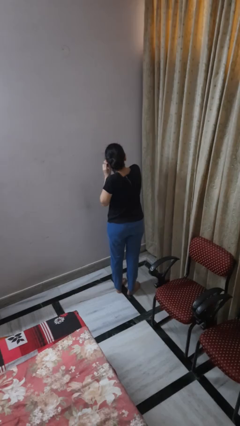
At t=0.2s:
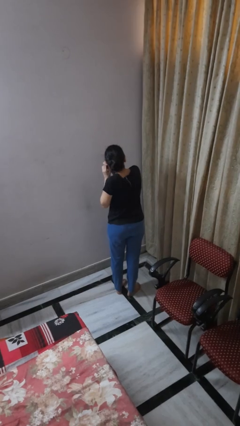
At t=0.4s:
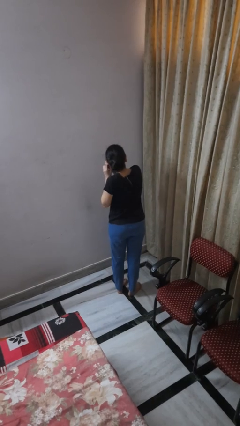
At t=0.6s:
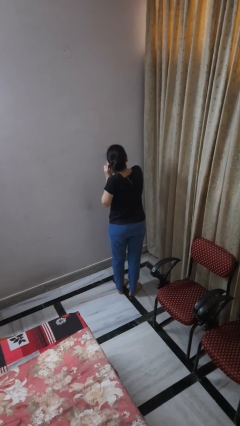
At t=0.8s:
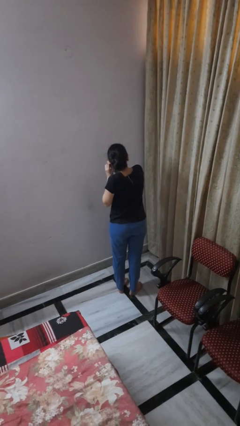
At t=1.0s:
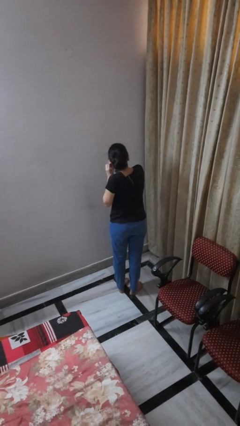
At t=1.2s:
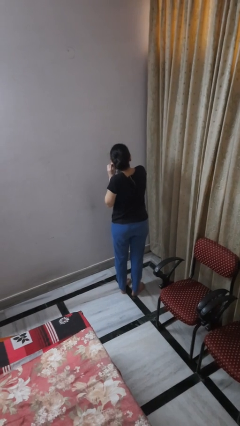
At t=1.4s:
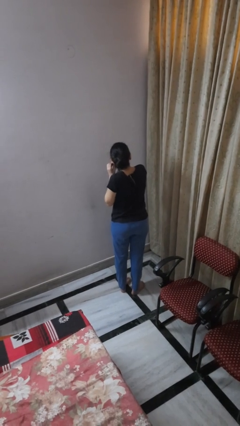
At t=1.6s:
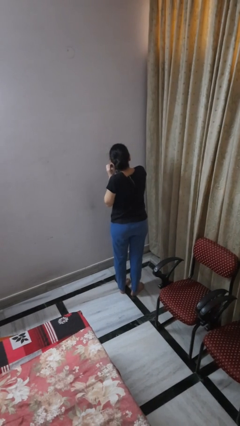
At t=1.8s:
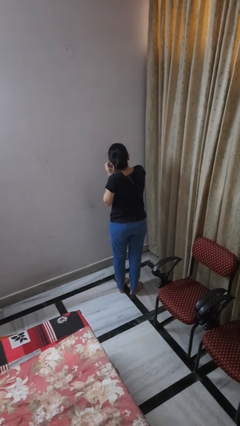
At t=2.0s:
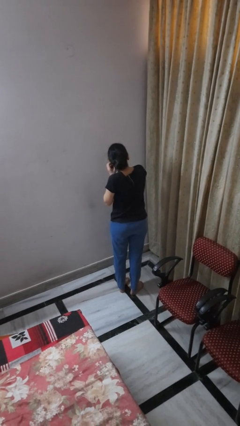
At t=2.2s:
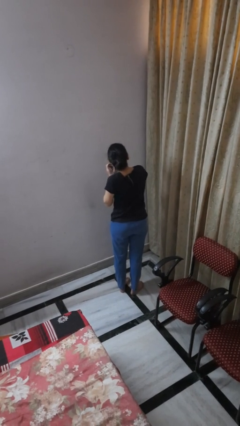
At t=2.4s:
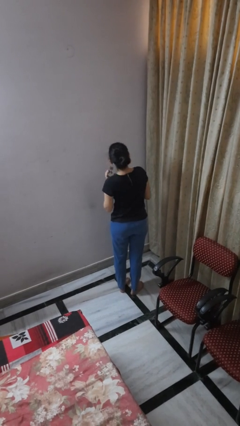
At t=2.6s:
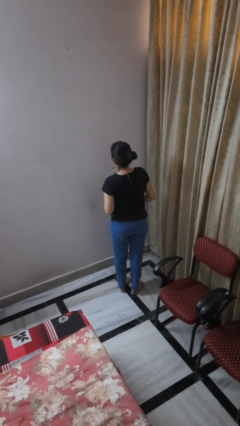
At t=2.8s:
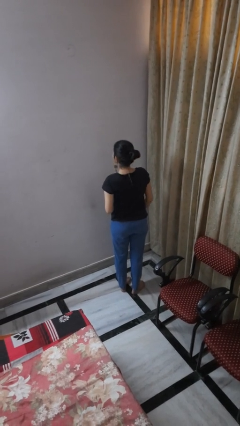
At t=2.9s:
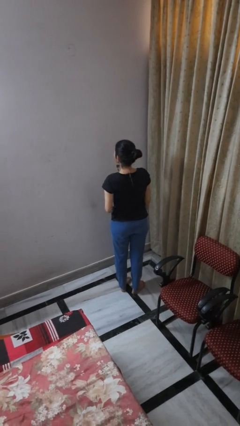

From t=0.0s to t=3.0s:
person puts on earrings

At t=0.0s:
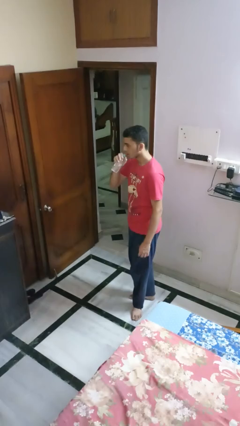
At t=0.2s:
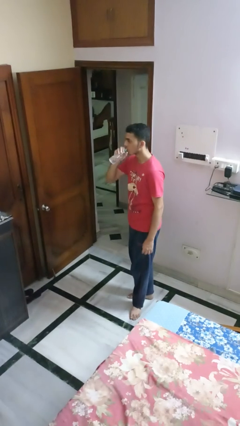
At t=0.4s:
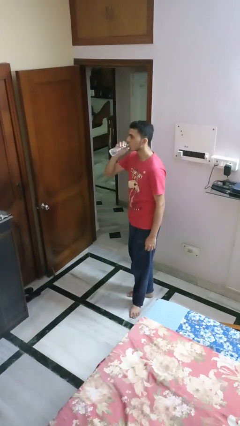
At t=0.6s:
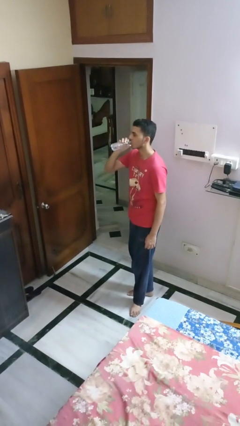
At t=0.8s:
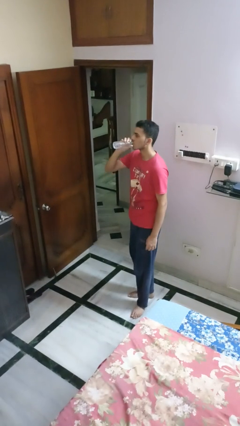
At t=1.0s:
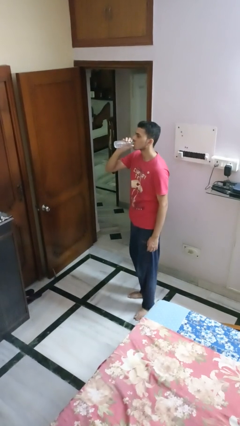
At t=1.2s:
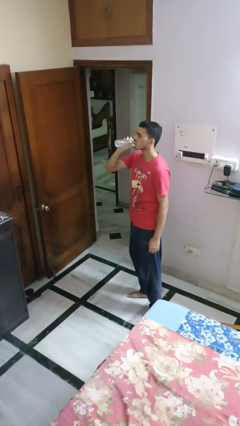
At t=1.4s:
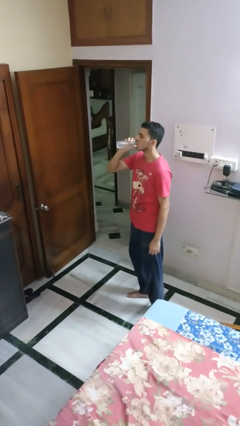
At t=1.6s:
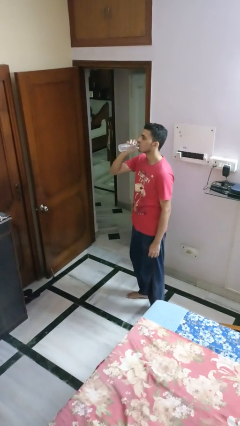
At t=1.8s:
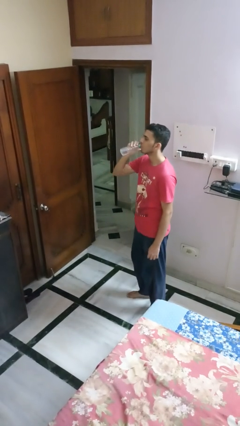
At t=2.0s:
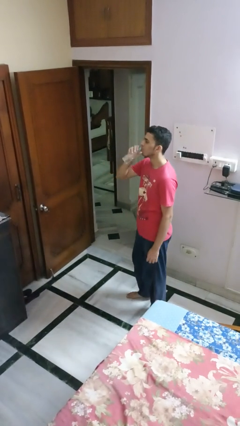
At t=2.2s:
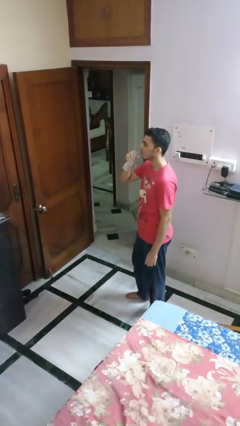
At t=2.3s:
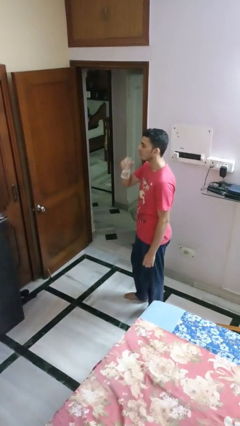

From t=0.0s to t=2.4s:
person drinks from bottle

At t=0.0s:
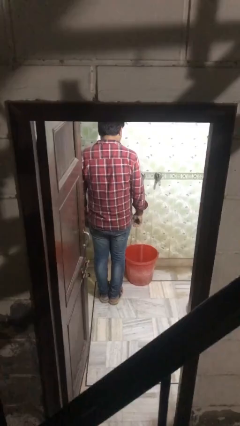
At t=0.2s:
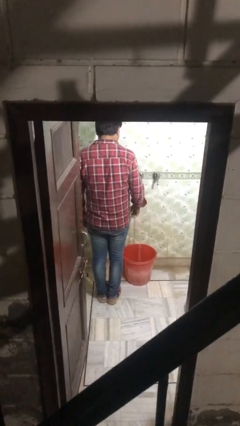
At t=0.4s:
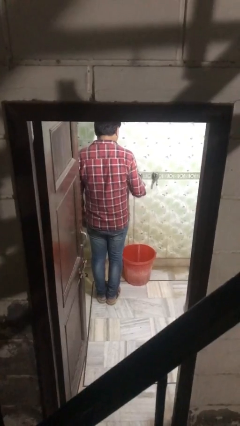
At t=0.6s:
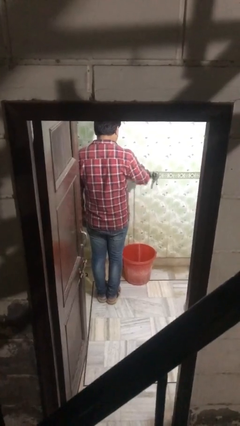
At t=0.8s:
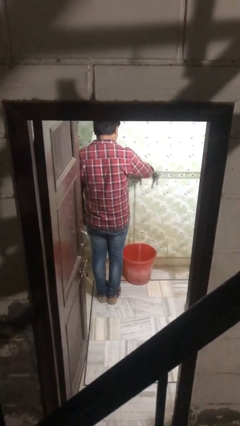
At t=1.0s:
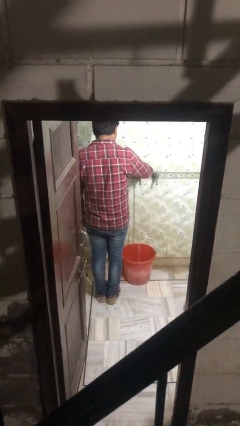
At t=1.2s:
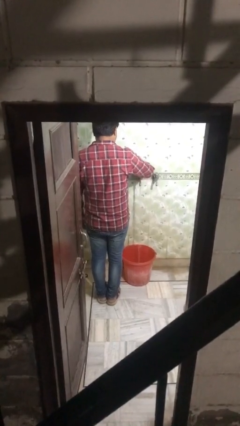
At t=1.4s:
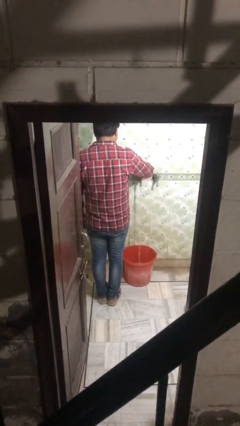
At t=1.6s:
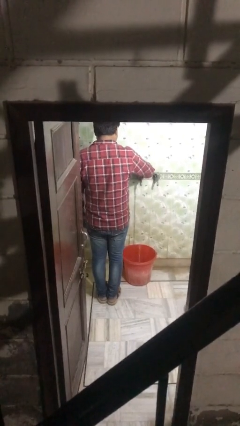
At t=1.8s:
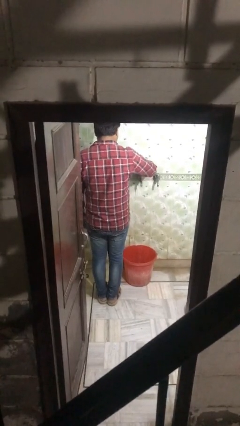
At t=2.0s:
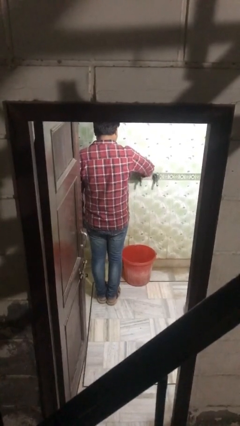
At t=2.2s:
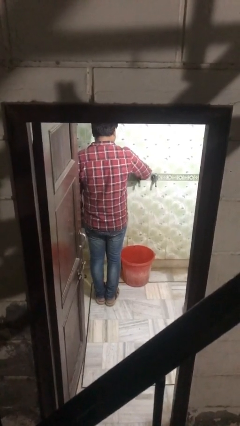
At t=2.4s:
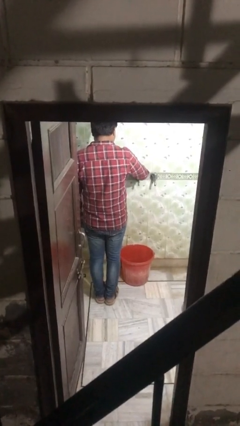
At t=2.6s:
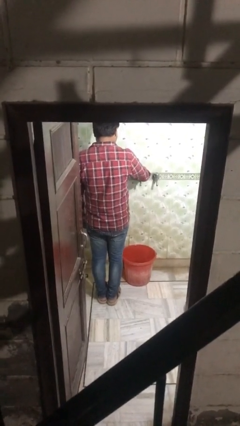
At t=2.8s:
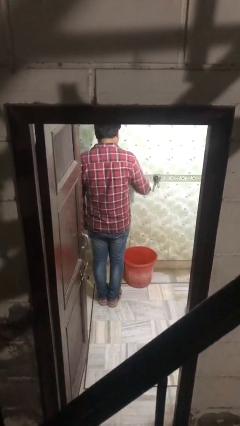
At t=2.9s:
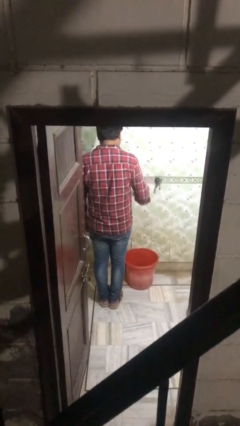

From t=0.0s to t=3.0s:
person turns off faucet

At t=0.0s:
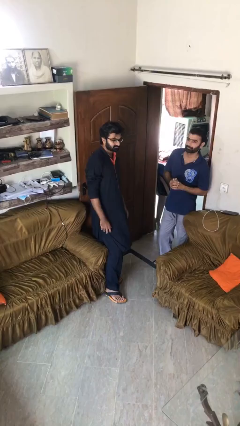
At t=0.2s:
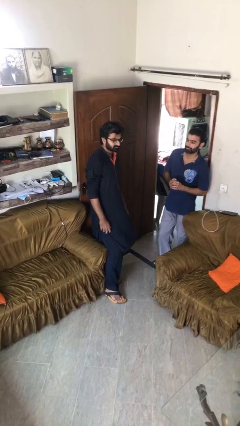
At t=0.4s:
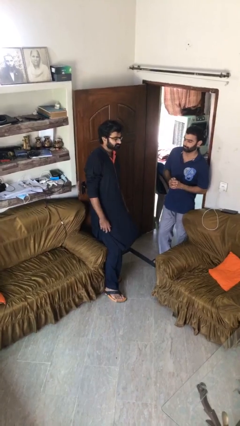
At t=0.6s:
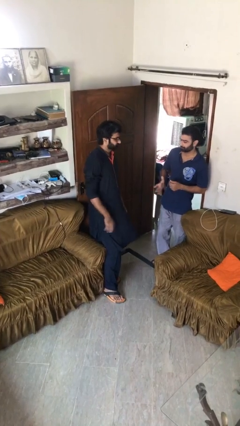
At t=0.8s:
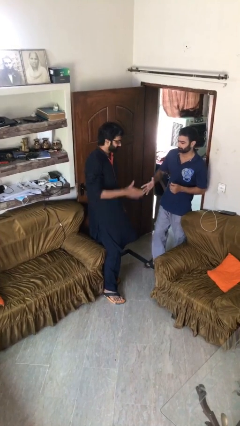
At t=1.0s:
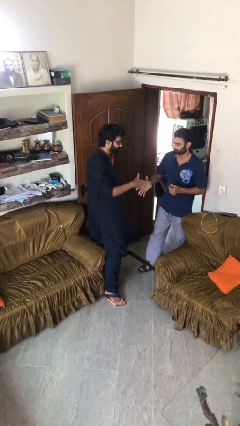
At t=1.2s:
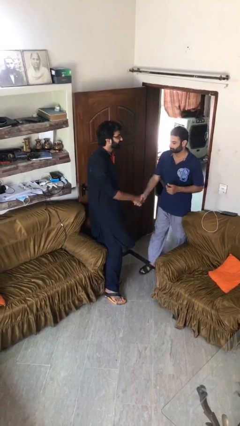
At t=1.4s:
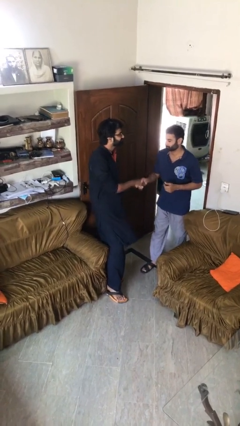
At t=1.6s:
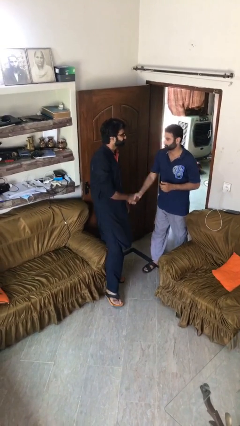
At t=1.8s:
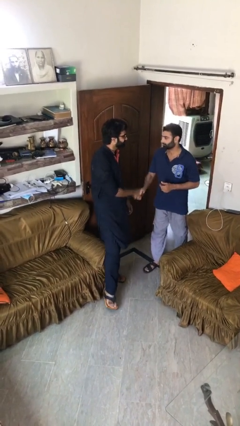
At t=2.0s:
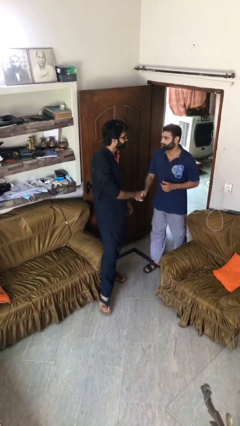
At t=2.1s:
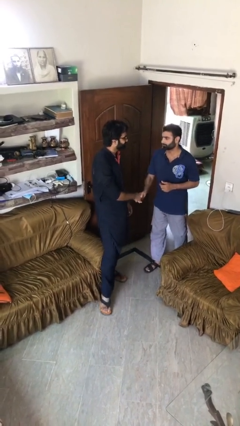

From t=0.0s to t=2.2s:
person shakes hand

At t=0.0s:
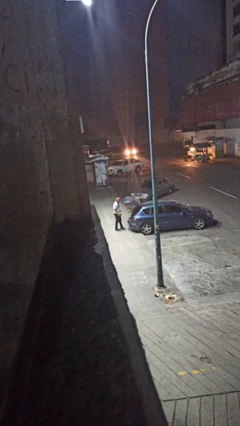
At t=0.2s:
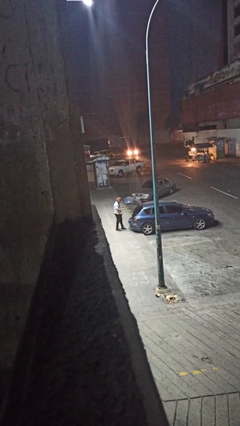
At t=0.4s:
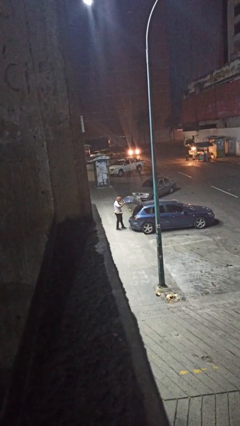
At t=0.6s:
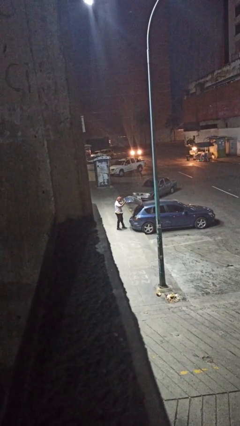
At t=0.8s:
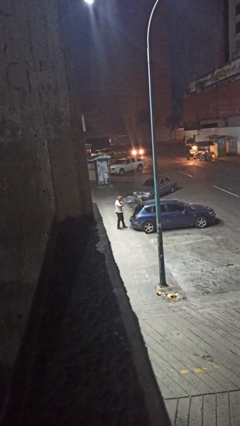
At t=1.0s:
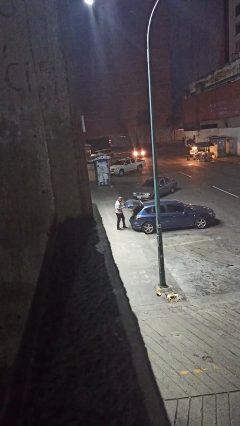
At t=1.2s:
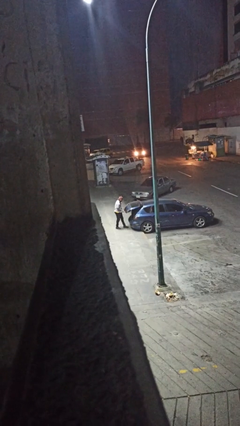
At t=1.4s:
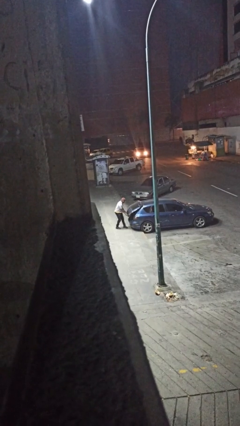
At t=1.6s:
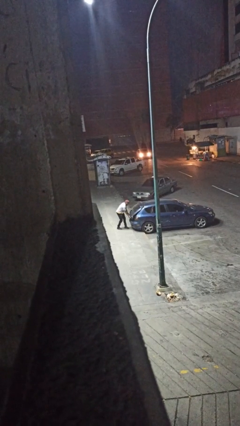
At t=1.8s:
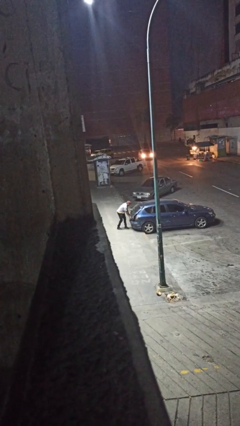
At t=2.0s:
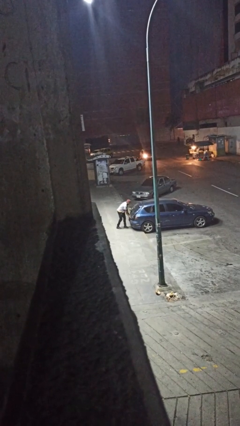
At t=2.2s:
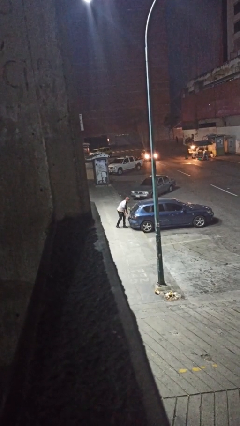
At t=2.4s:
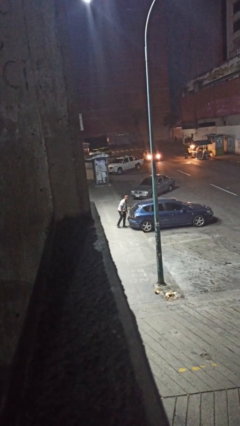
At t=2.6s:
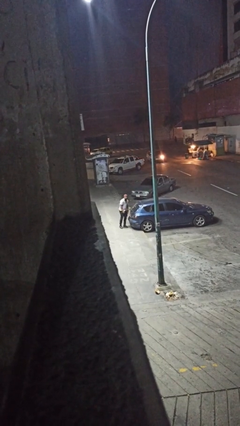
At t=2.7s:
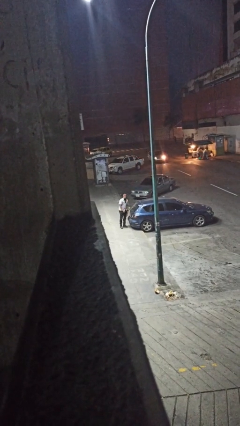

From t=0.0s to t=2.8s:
person closes car trunk

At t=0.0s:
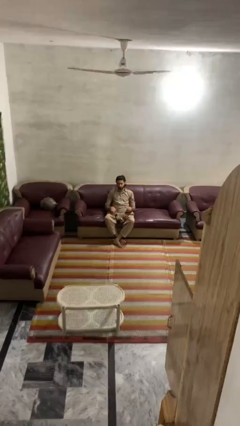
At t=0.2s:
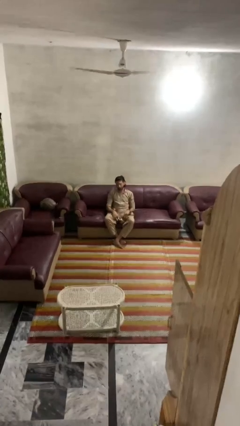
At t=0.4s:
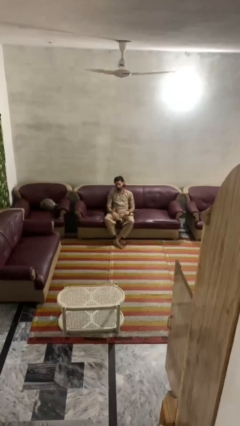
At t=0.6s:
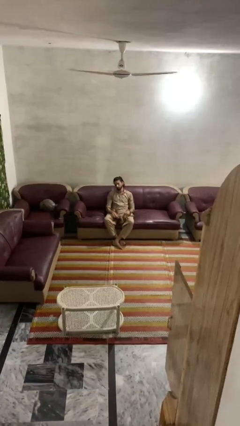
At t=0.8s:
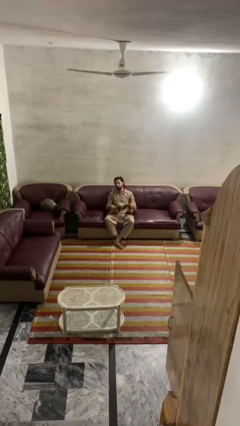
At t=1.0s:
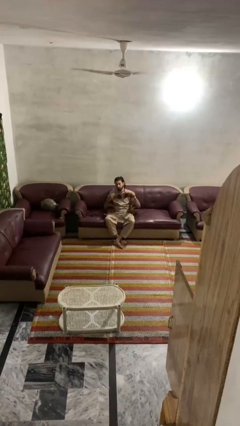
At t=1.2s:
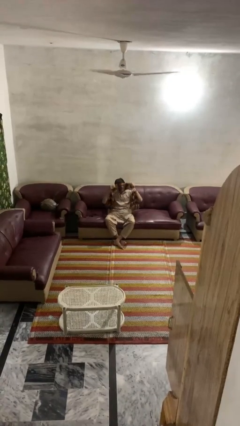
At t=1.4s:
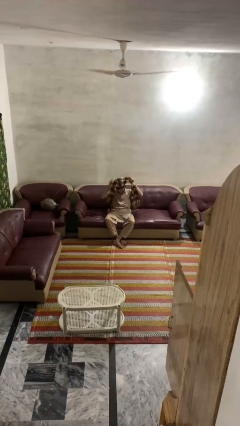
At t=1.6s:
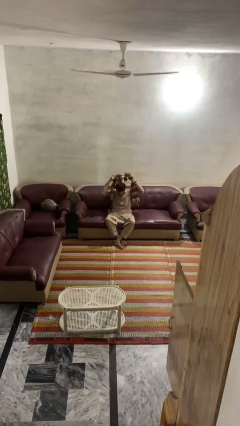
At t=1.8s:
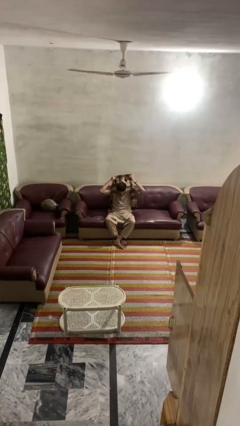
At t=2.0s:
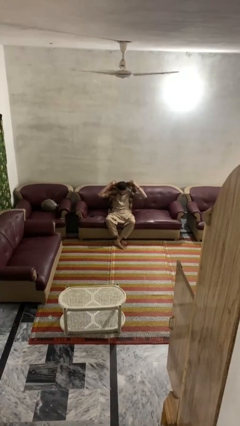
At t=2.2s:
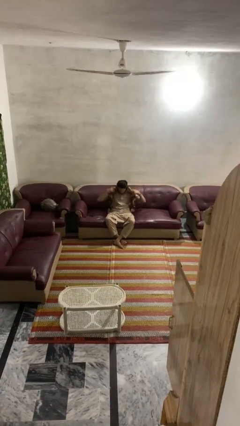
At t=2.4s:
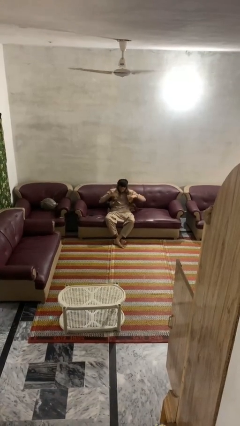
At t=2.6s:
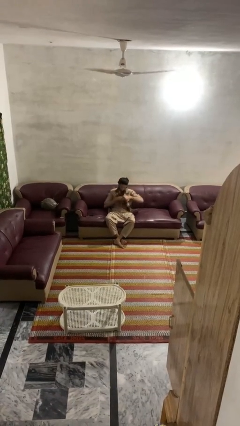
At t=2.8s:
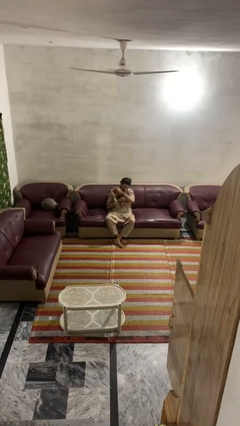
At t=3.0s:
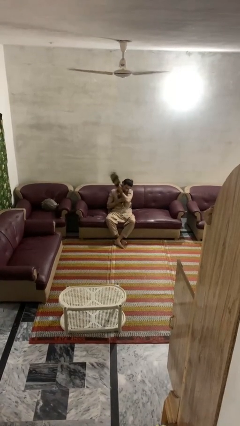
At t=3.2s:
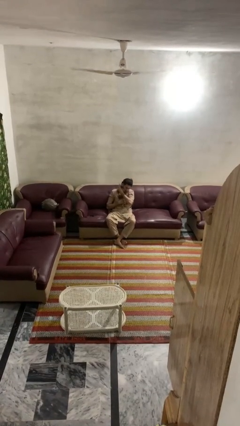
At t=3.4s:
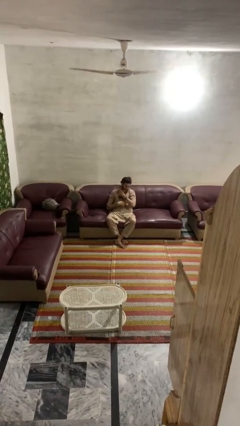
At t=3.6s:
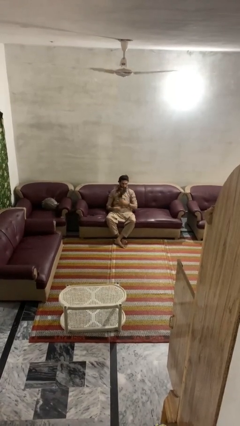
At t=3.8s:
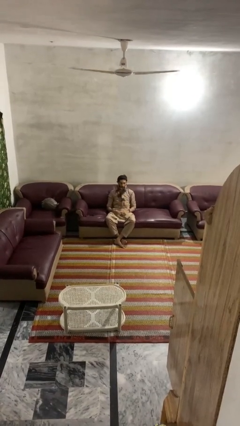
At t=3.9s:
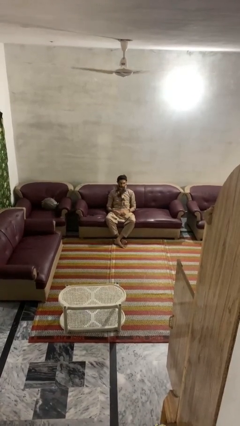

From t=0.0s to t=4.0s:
person puts on scarf
